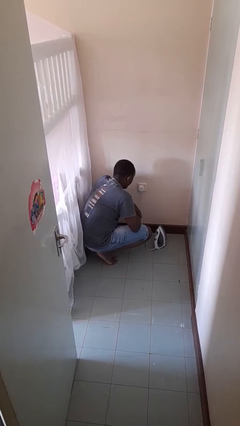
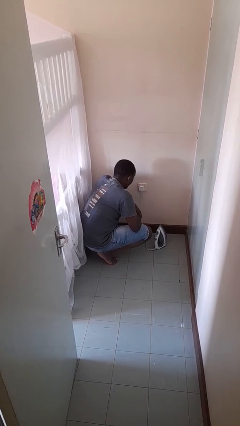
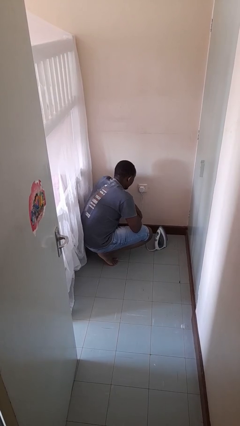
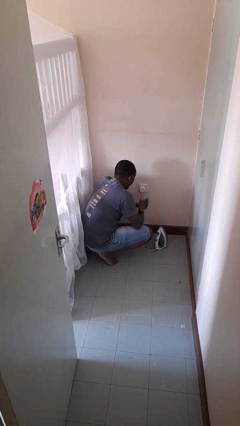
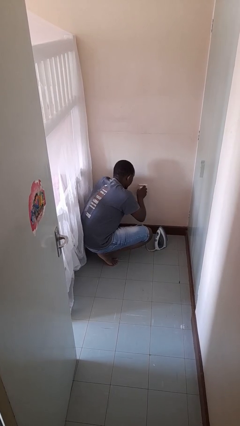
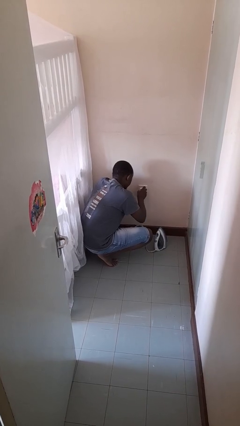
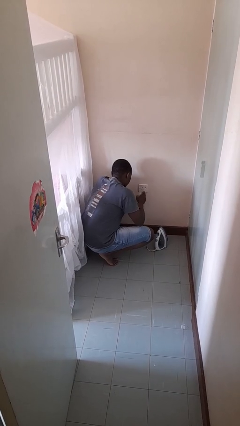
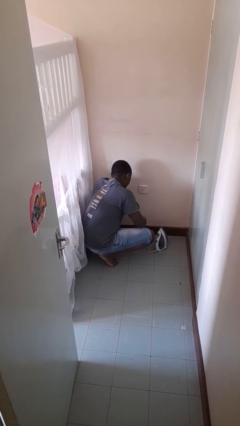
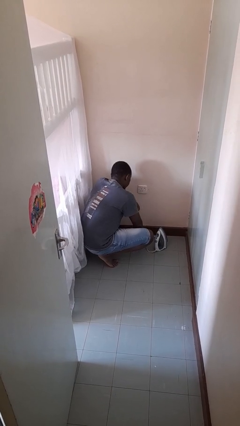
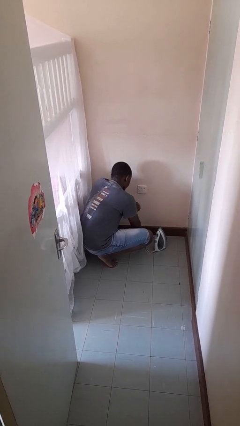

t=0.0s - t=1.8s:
person unplugs from electrical socket

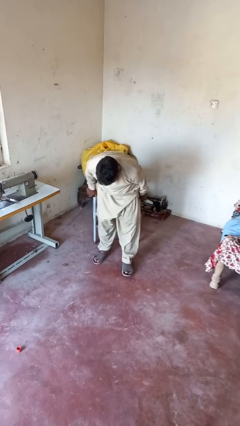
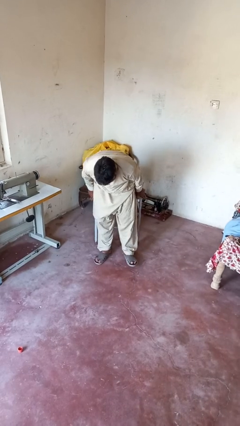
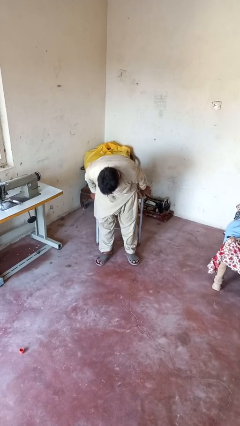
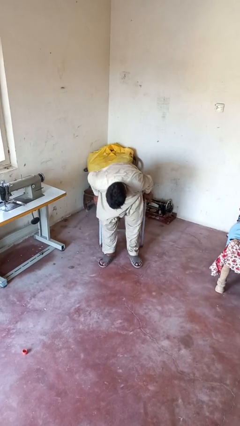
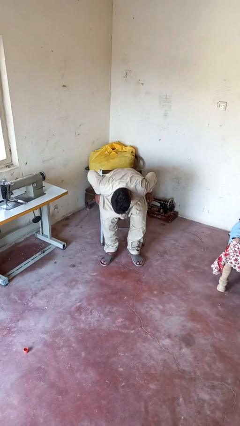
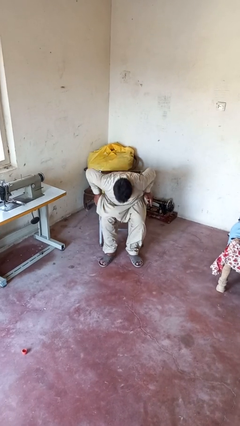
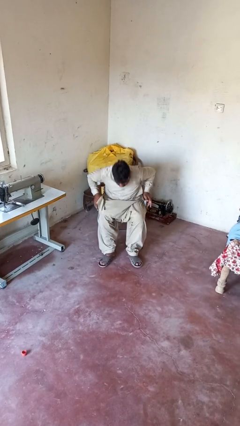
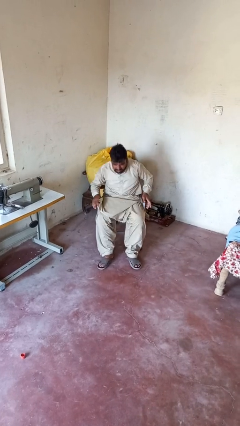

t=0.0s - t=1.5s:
person sits down

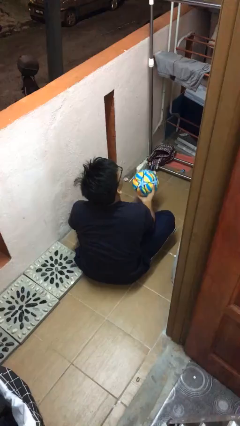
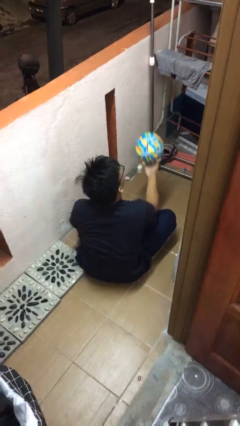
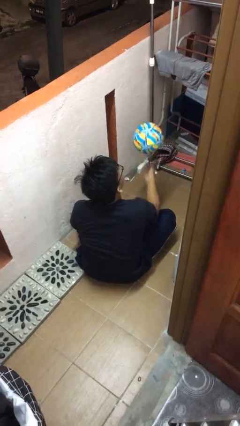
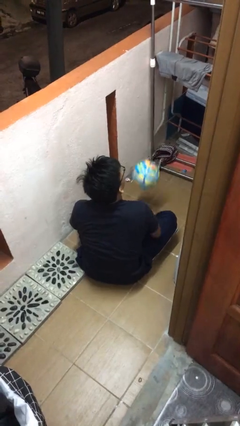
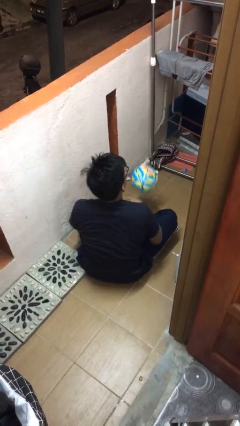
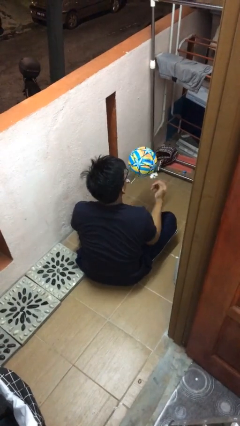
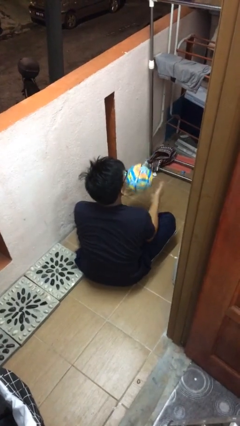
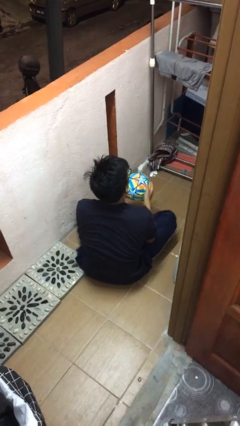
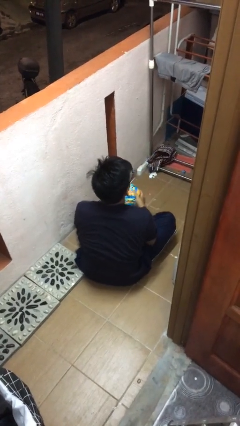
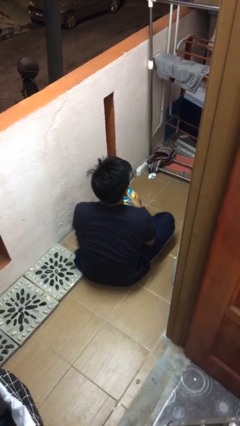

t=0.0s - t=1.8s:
person bounces ball on floor

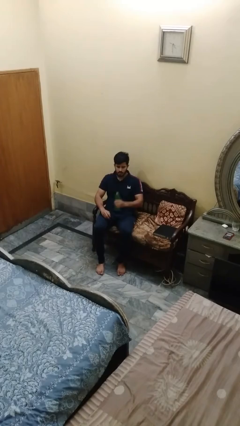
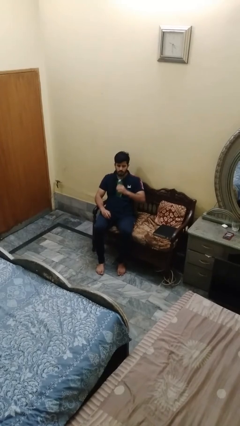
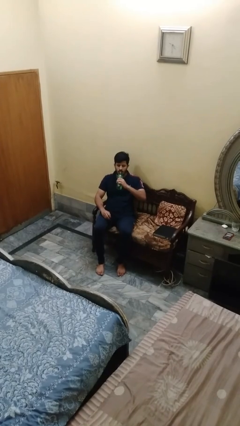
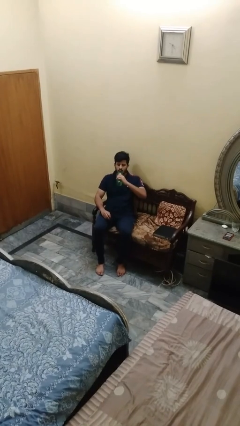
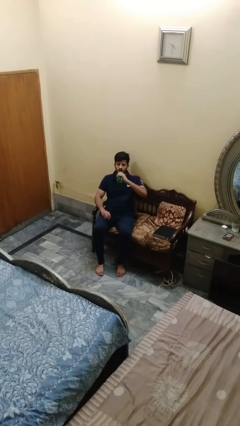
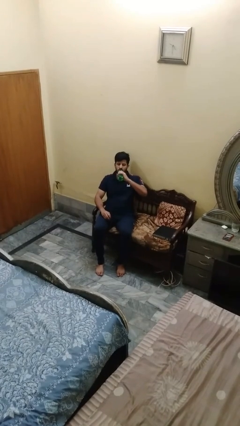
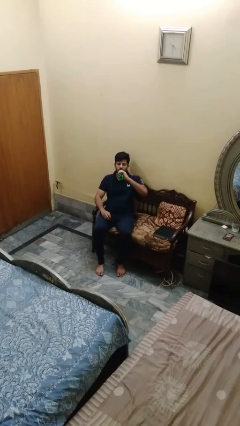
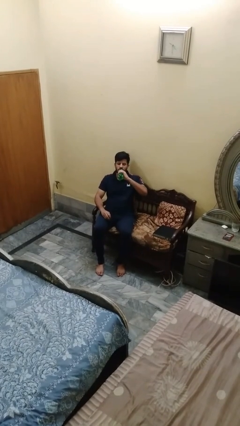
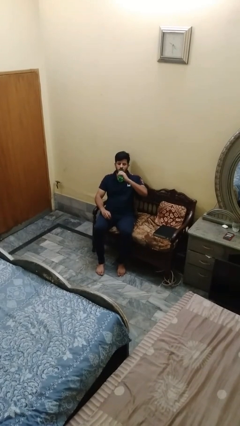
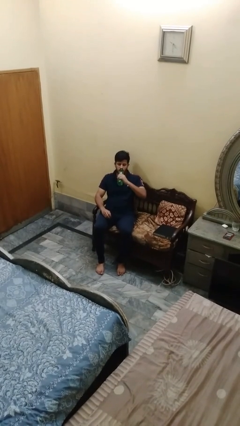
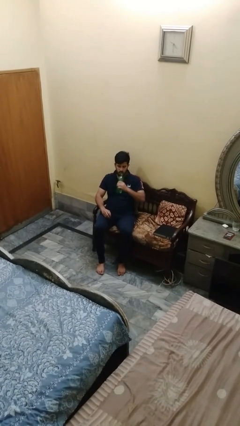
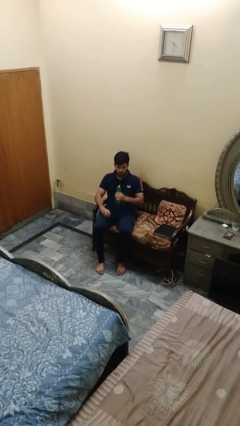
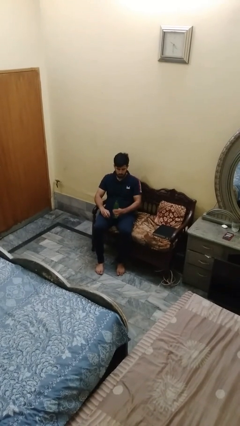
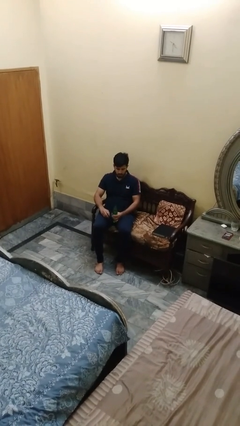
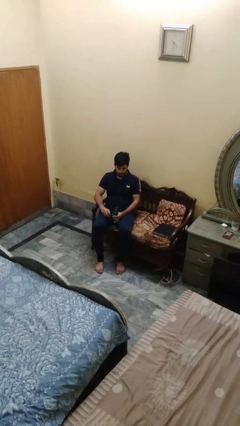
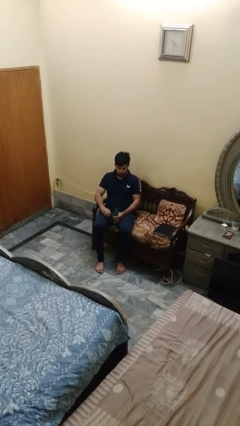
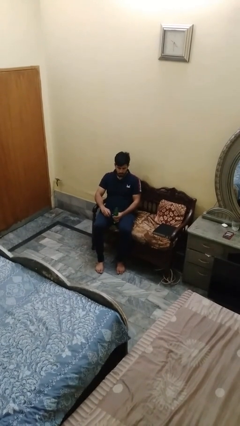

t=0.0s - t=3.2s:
person drinks from bottle

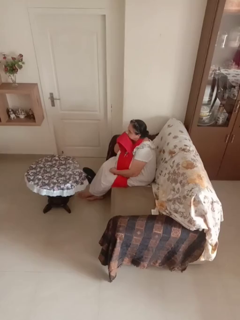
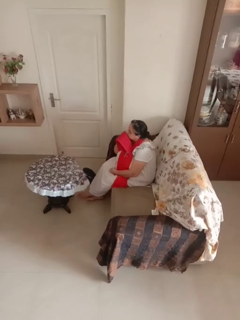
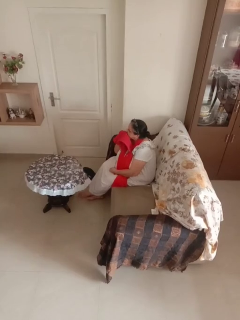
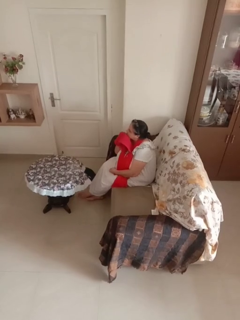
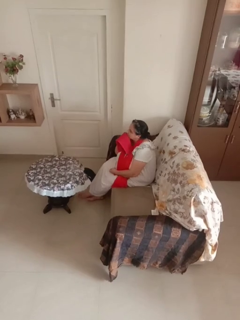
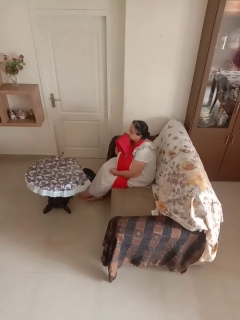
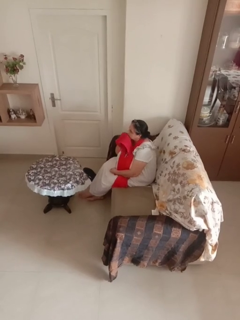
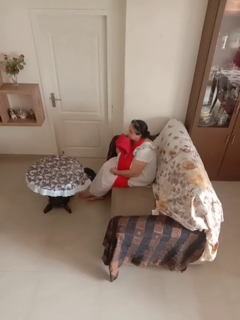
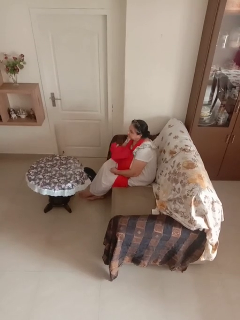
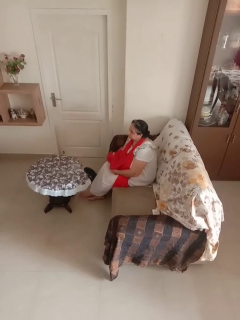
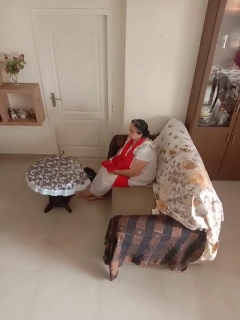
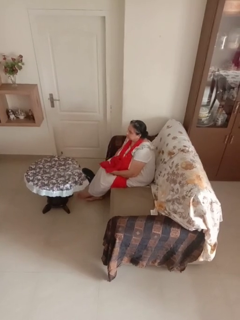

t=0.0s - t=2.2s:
person wipes mouth with napkin

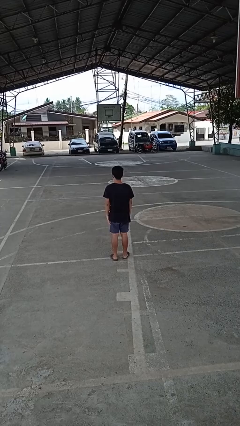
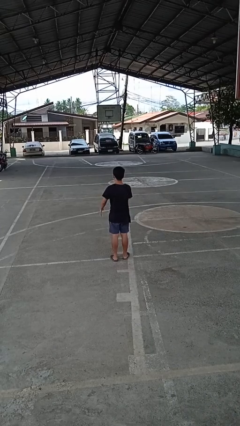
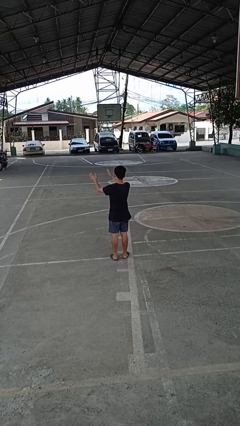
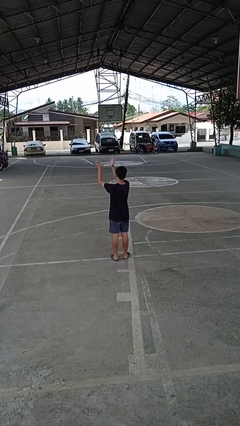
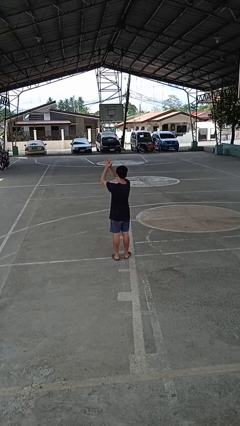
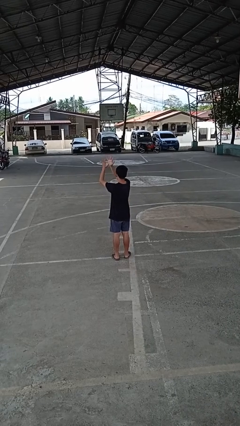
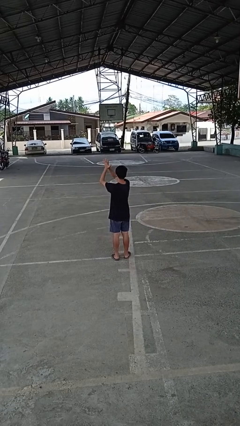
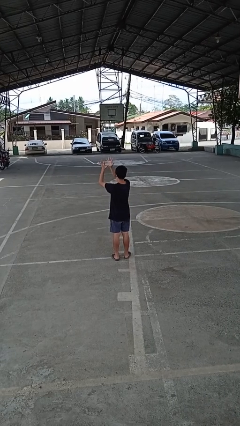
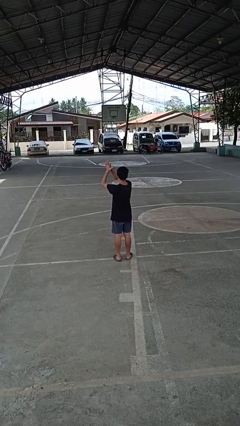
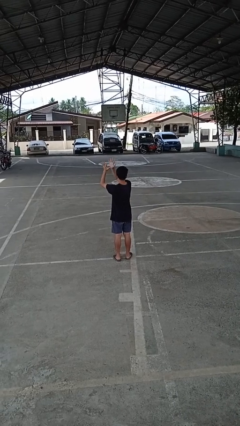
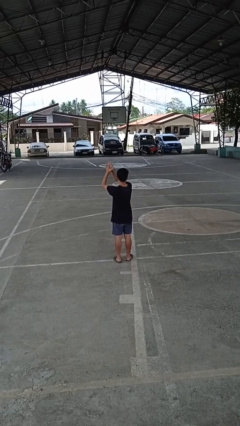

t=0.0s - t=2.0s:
person claps hands

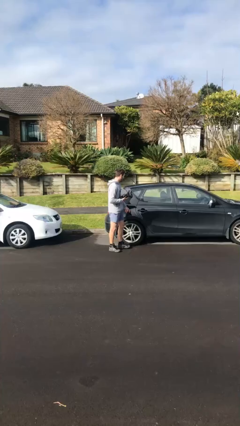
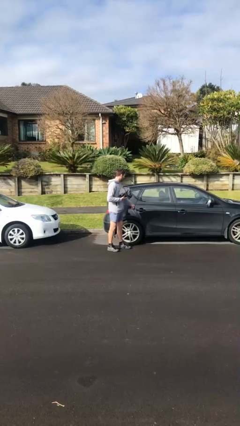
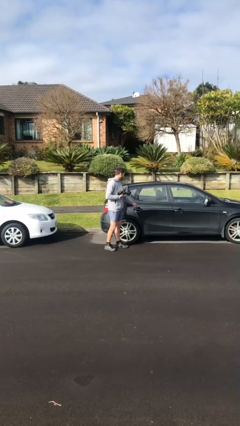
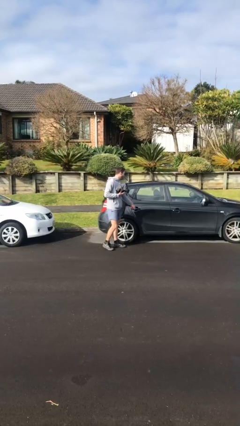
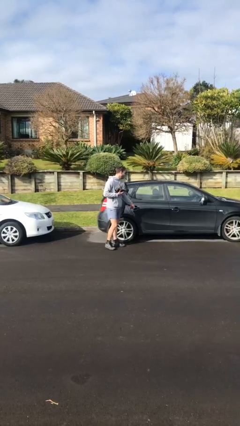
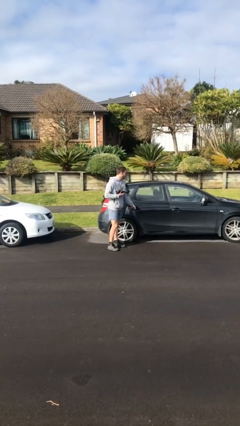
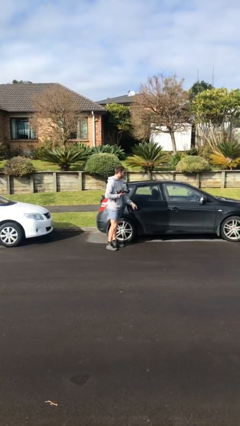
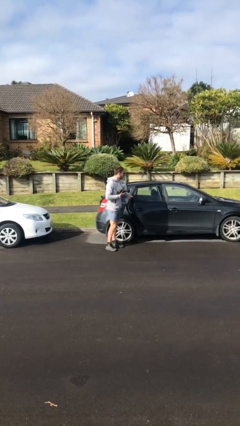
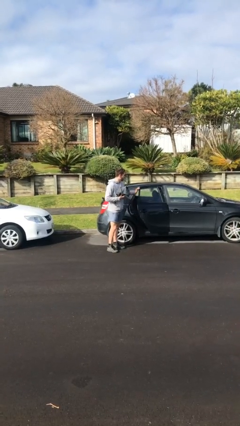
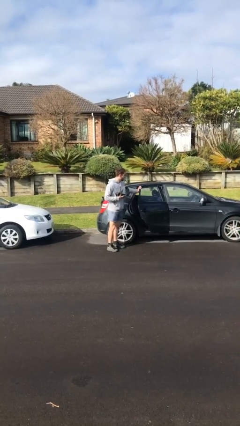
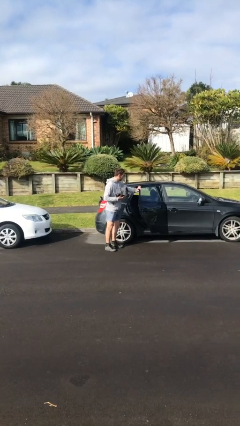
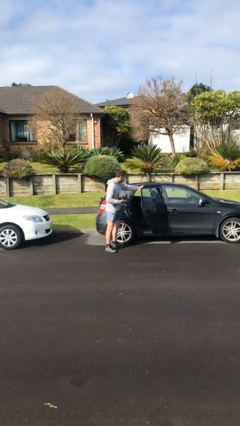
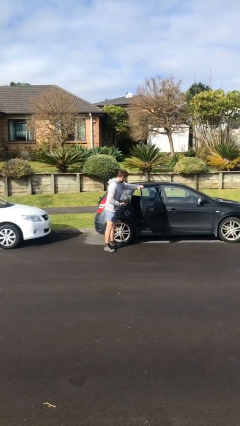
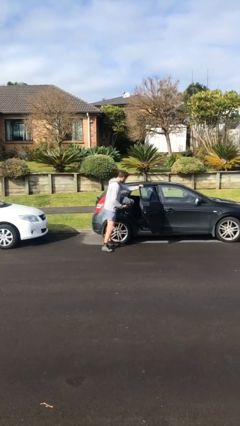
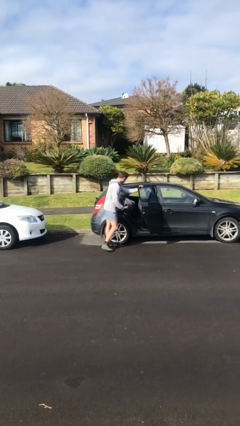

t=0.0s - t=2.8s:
person opens car door

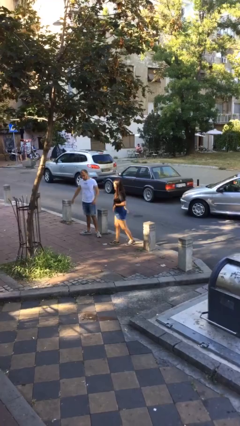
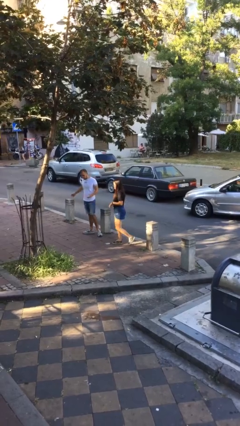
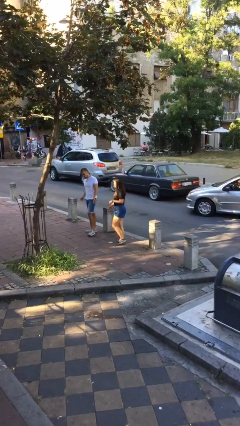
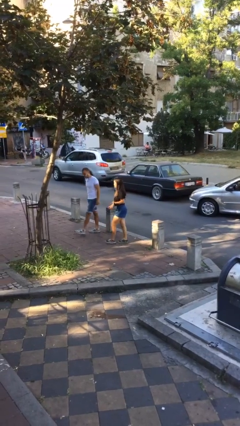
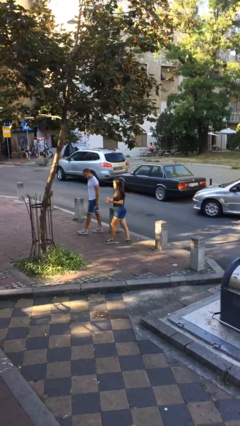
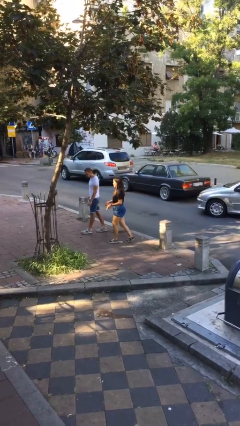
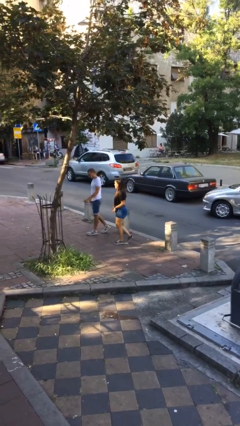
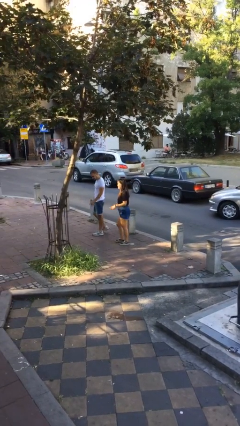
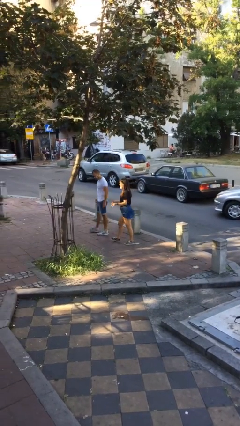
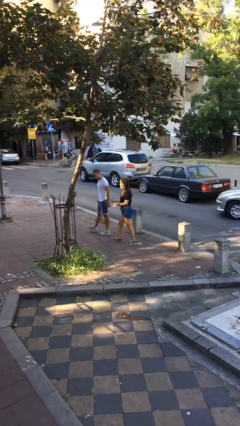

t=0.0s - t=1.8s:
person talks to person

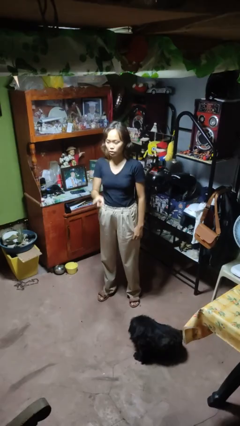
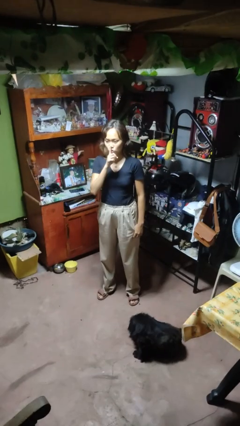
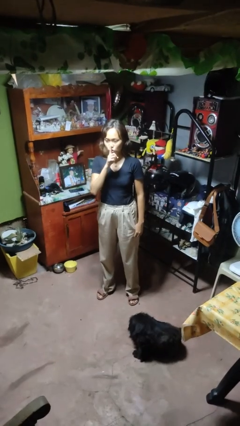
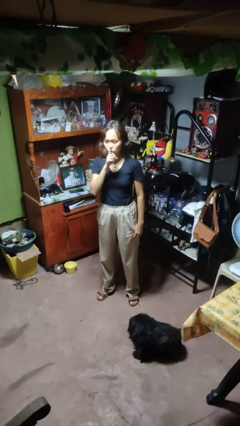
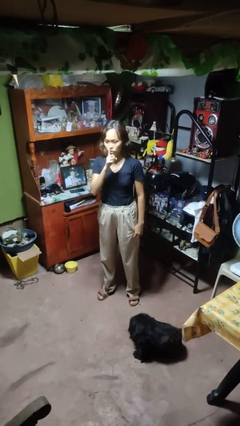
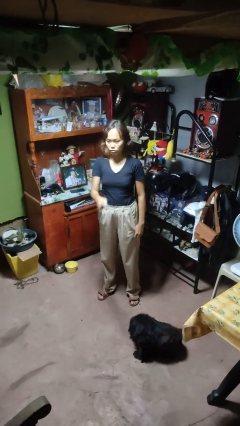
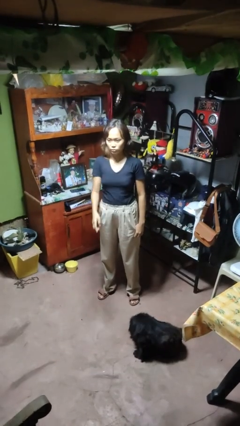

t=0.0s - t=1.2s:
person gestures be quiet
